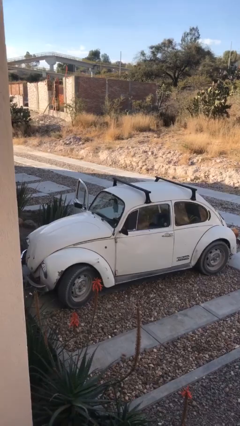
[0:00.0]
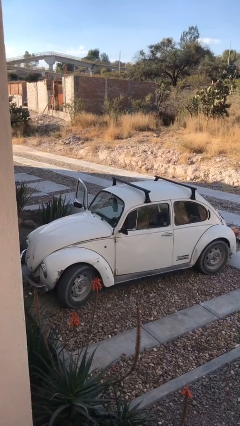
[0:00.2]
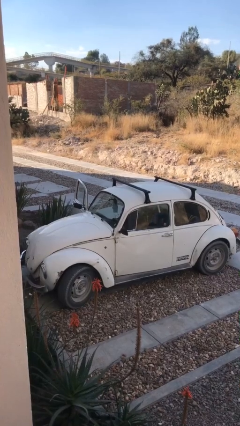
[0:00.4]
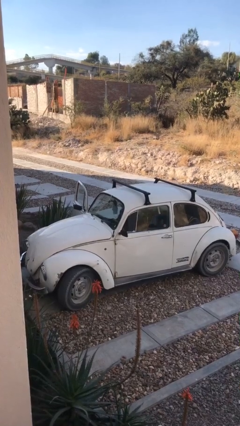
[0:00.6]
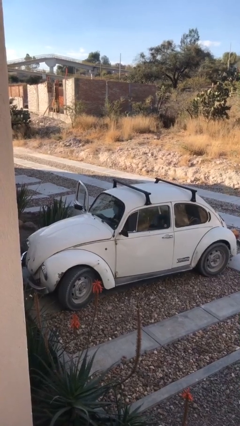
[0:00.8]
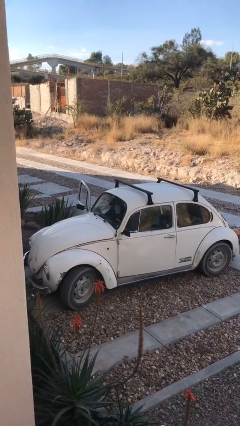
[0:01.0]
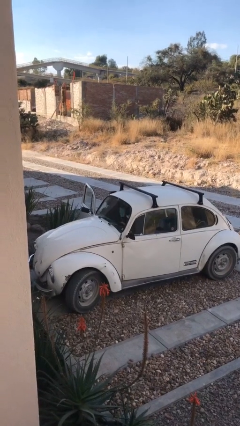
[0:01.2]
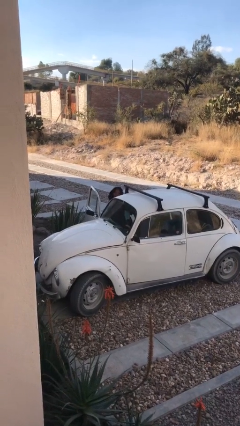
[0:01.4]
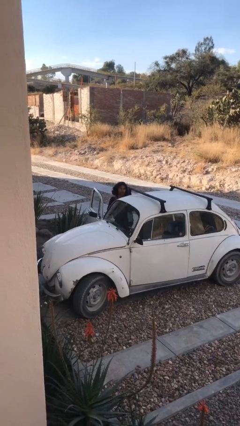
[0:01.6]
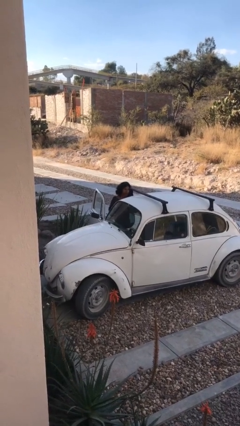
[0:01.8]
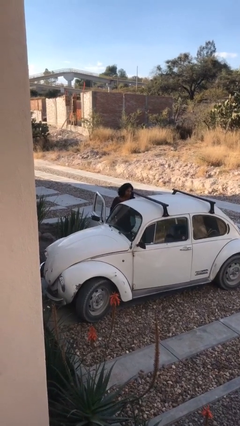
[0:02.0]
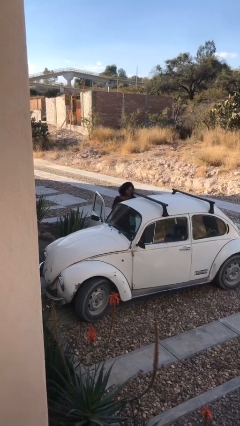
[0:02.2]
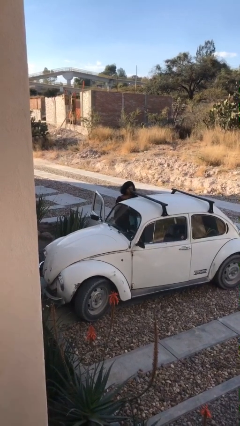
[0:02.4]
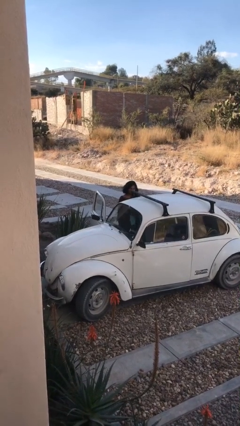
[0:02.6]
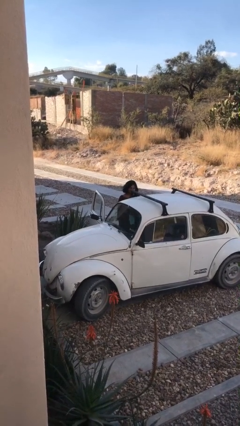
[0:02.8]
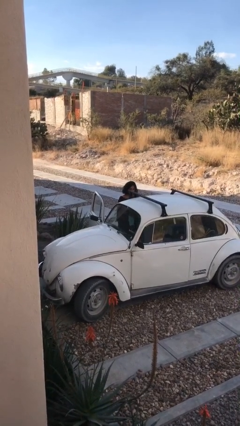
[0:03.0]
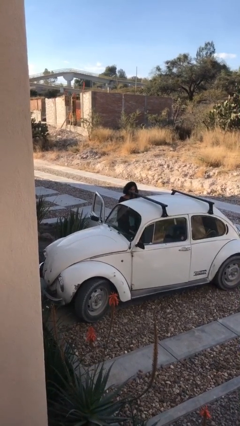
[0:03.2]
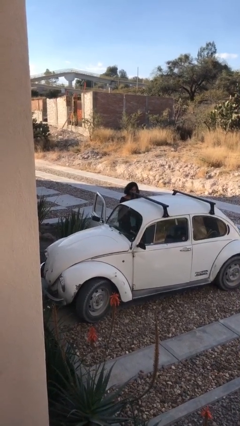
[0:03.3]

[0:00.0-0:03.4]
person exits car

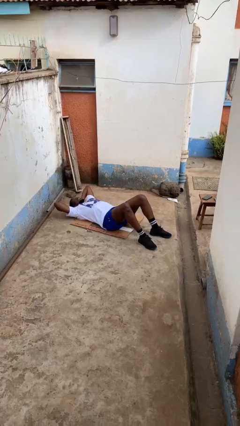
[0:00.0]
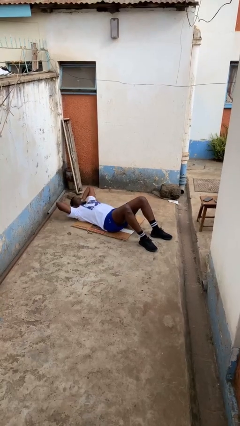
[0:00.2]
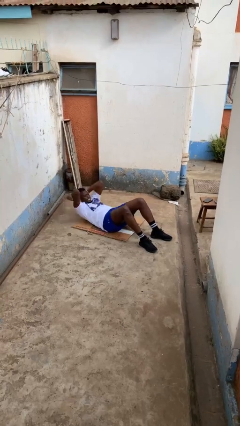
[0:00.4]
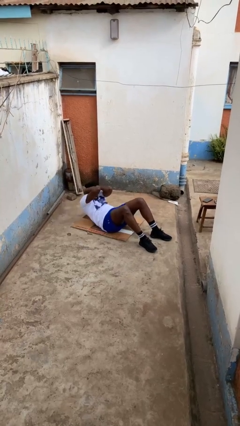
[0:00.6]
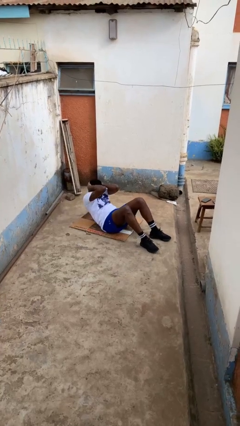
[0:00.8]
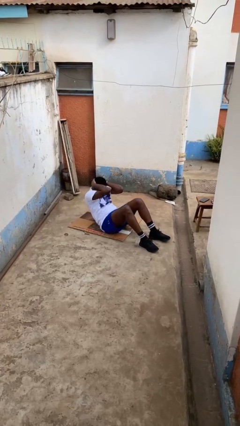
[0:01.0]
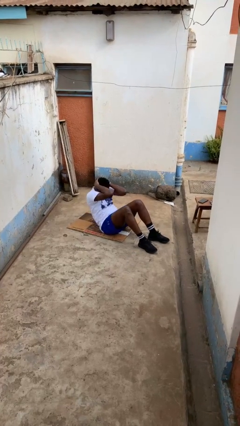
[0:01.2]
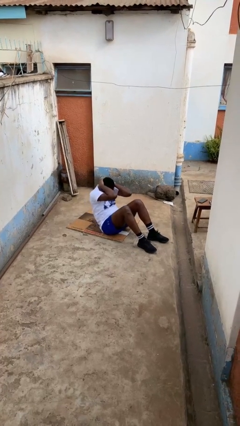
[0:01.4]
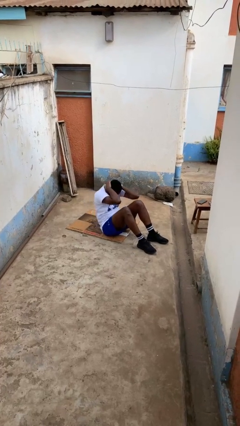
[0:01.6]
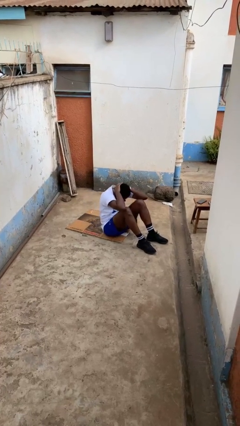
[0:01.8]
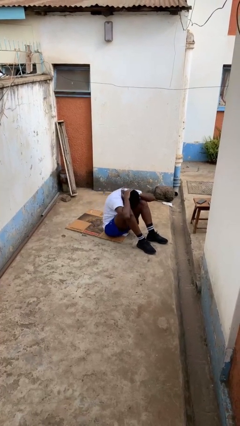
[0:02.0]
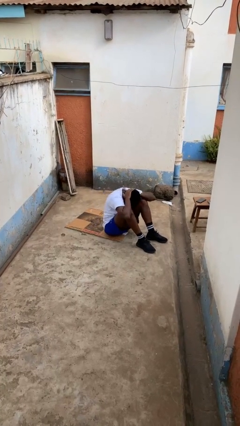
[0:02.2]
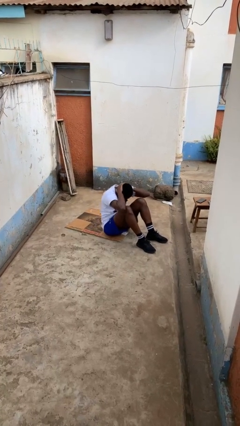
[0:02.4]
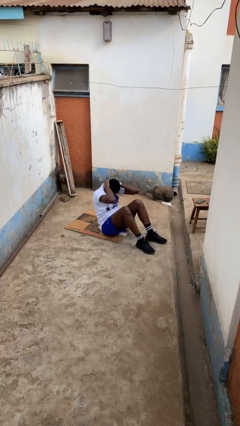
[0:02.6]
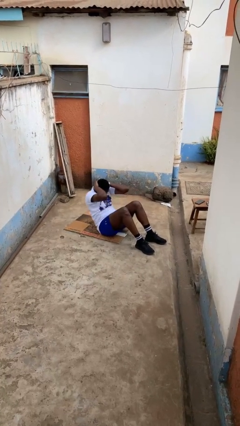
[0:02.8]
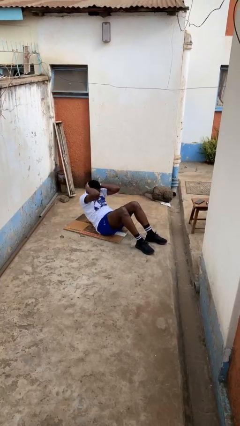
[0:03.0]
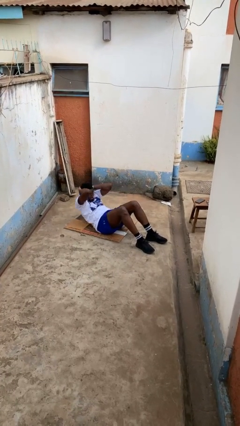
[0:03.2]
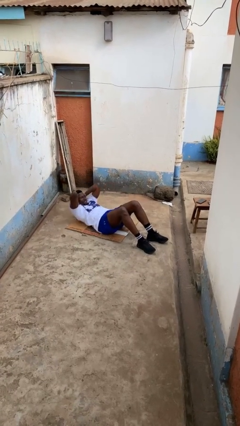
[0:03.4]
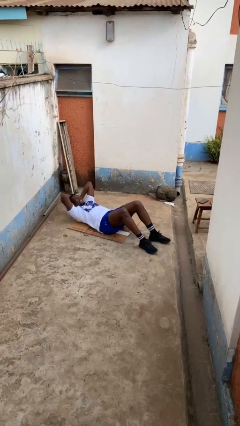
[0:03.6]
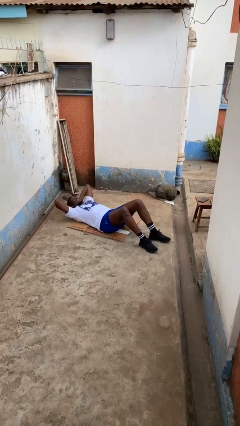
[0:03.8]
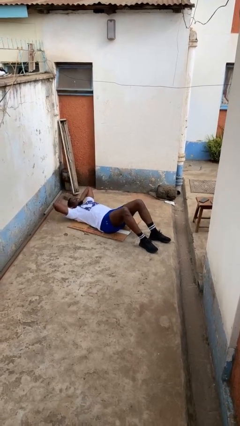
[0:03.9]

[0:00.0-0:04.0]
person exercises with situp

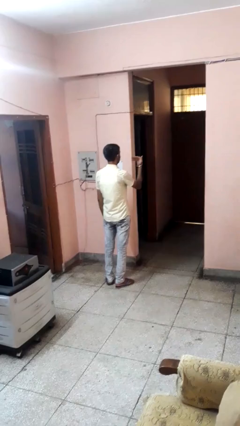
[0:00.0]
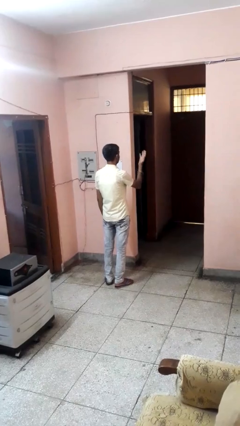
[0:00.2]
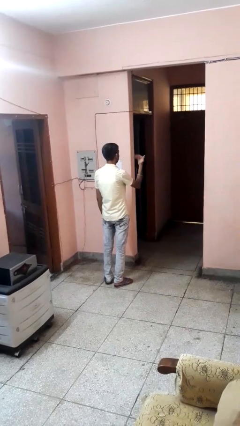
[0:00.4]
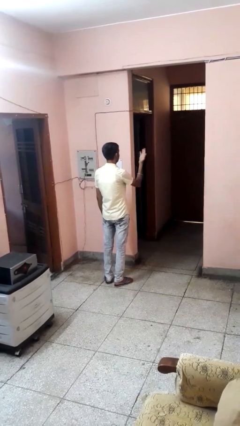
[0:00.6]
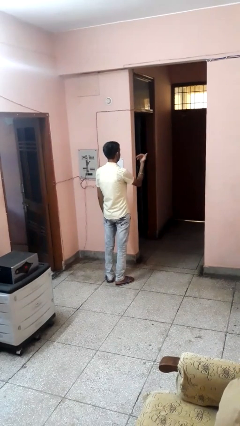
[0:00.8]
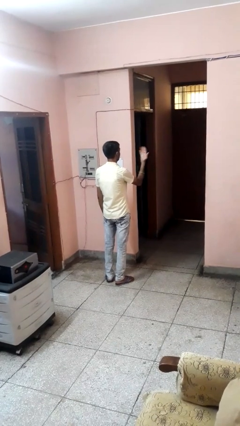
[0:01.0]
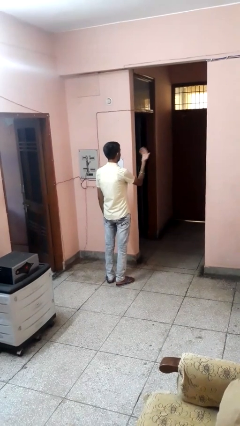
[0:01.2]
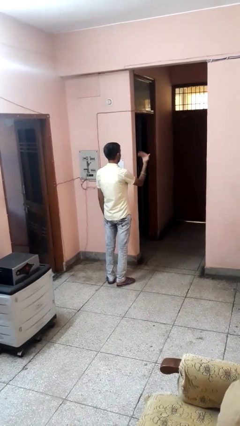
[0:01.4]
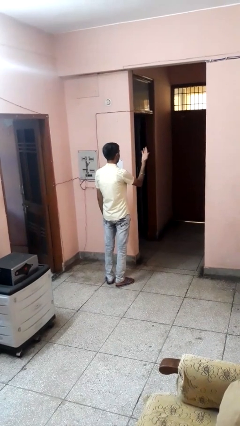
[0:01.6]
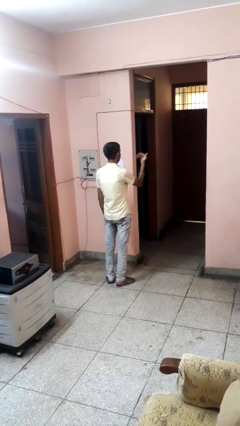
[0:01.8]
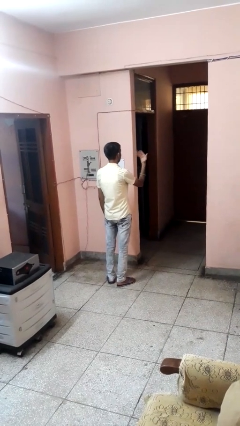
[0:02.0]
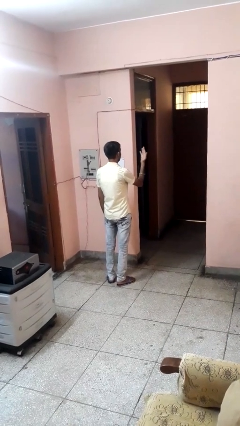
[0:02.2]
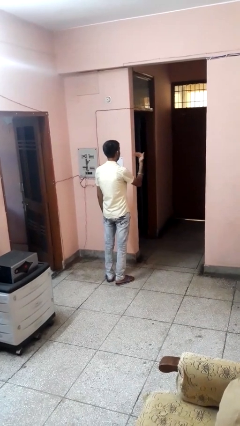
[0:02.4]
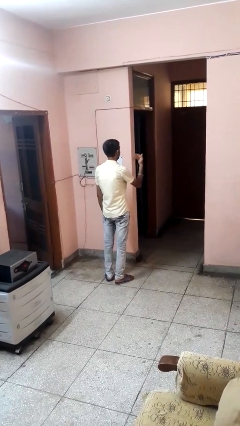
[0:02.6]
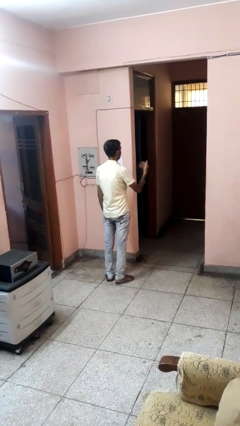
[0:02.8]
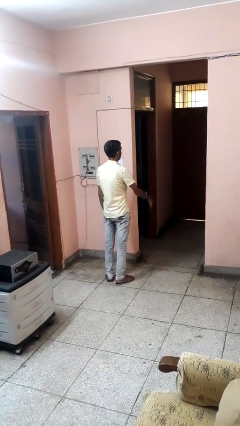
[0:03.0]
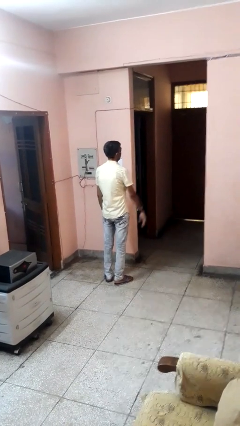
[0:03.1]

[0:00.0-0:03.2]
person gestures come here

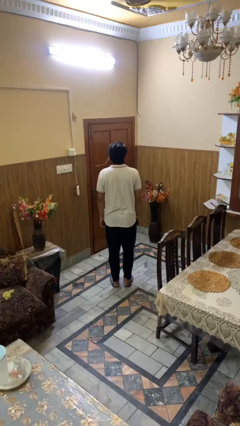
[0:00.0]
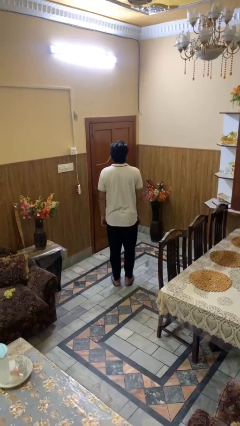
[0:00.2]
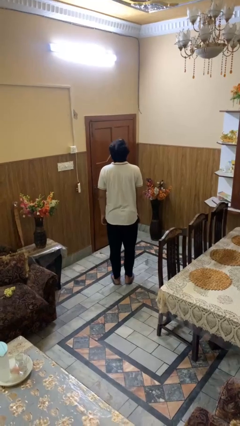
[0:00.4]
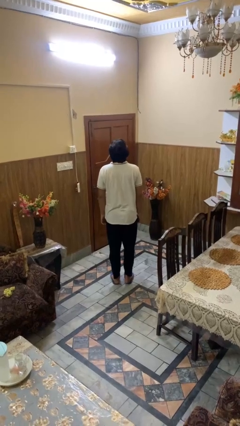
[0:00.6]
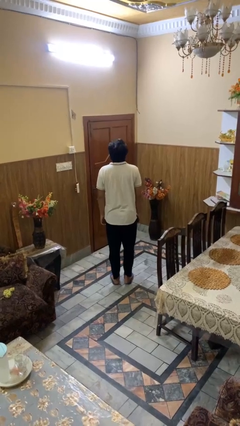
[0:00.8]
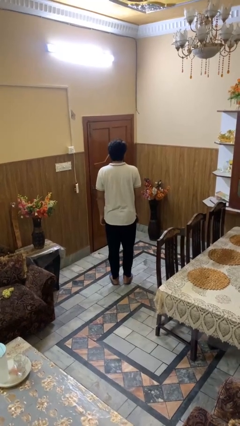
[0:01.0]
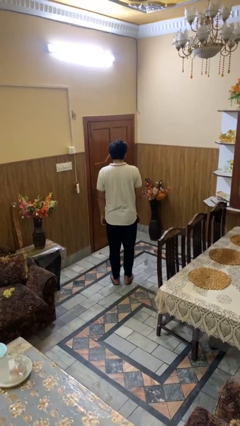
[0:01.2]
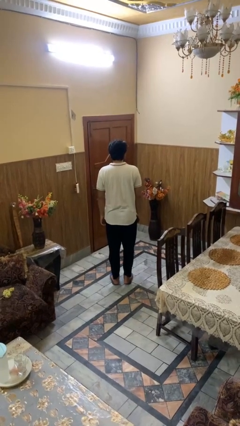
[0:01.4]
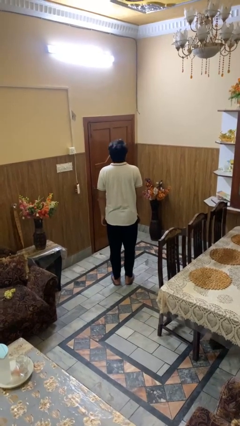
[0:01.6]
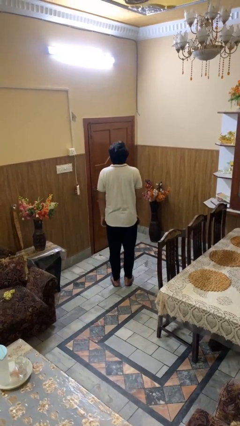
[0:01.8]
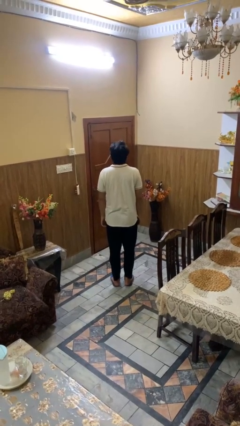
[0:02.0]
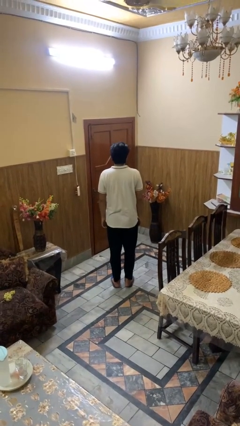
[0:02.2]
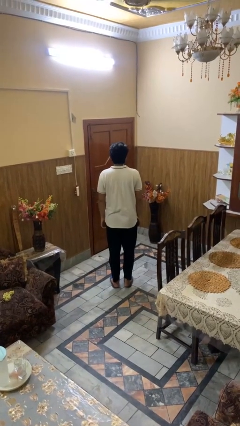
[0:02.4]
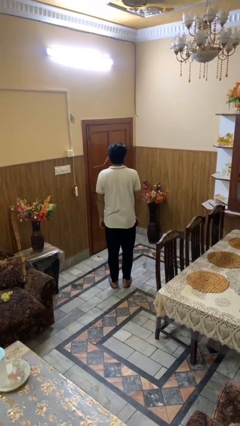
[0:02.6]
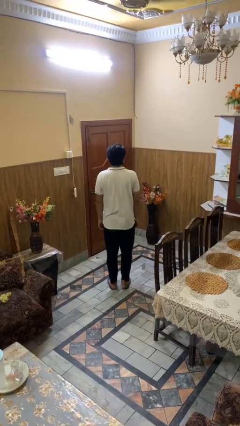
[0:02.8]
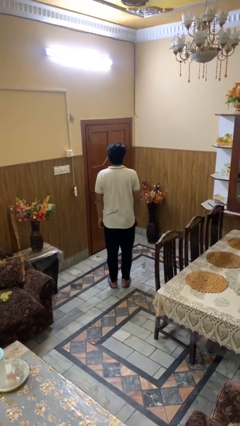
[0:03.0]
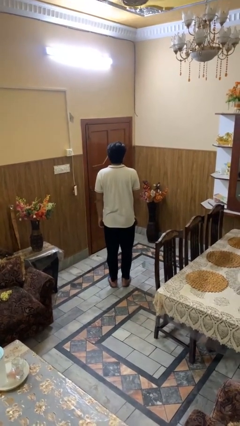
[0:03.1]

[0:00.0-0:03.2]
person nods head

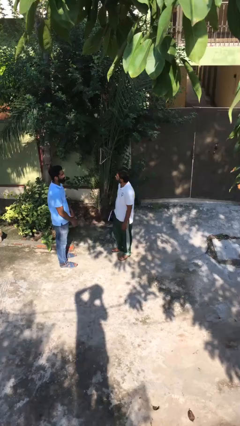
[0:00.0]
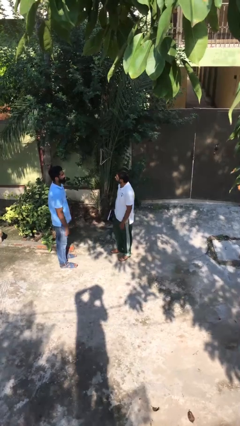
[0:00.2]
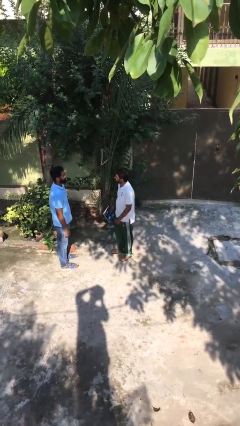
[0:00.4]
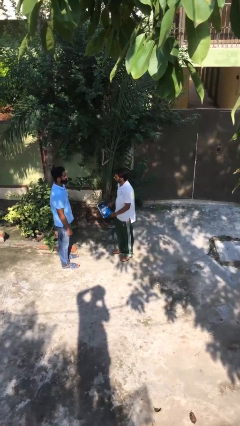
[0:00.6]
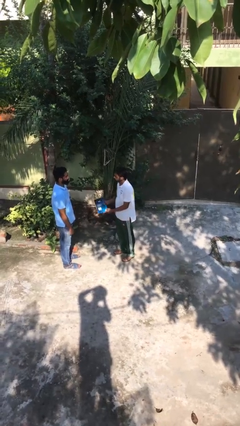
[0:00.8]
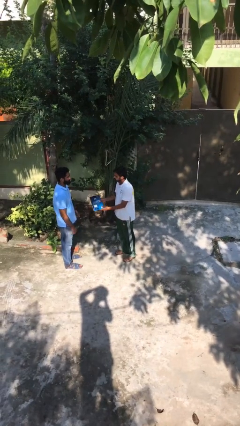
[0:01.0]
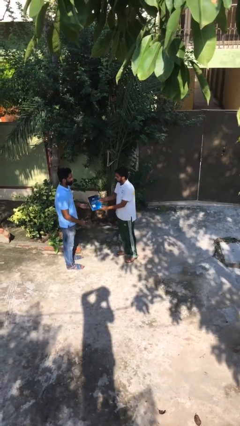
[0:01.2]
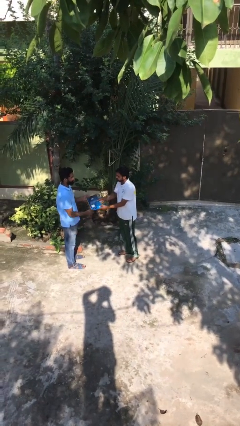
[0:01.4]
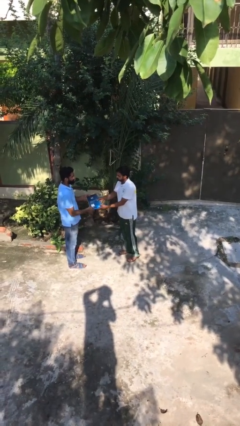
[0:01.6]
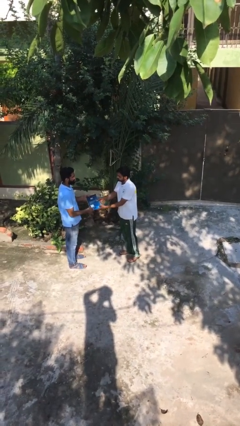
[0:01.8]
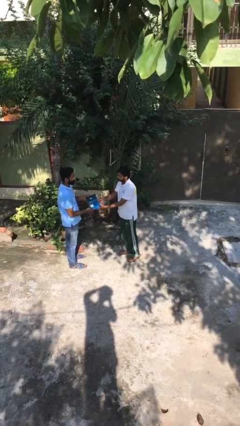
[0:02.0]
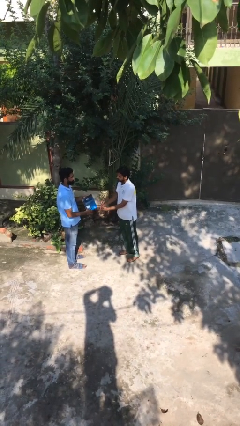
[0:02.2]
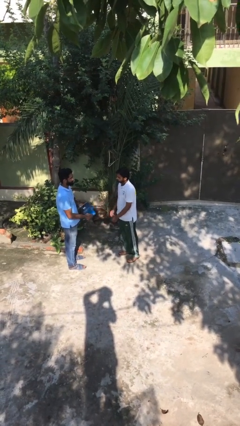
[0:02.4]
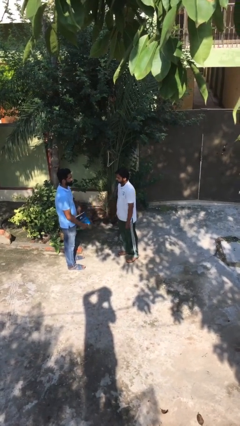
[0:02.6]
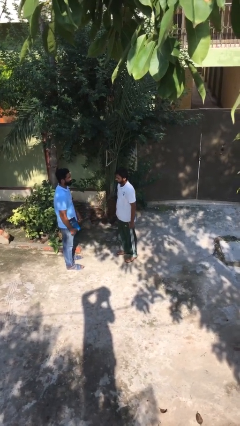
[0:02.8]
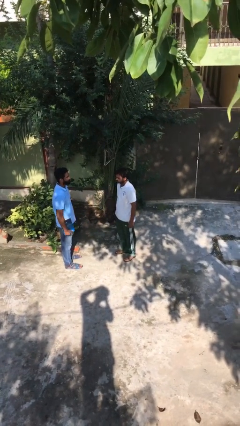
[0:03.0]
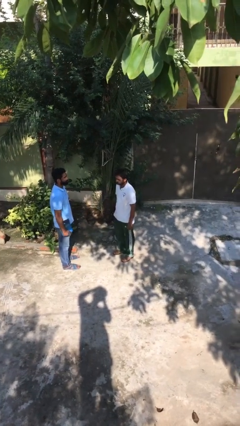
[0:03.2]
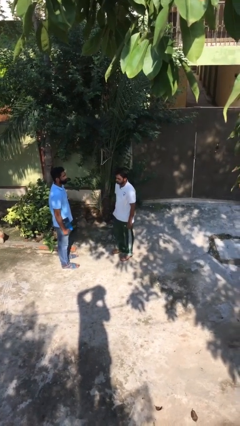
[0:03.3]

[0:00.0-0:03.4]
person transfers object to person

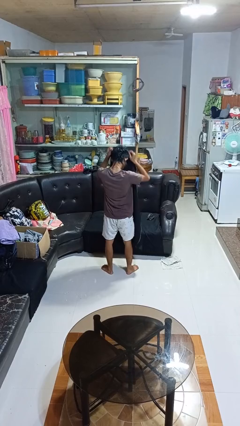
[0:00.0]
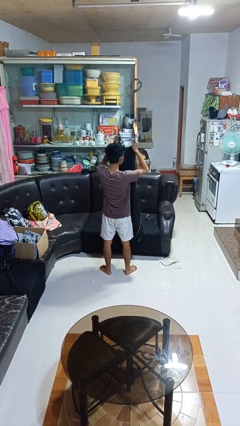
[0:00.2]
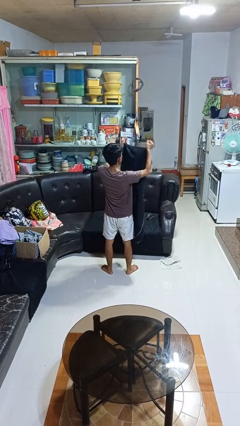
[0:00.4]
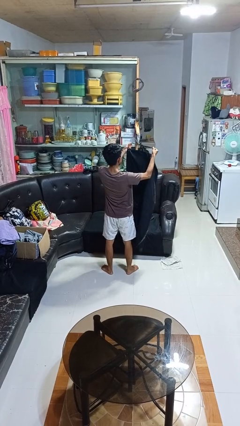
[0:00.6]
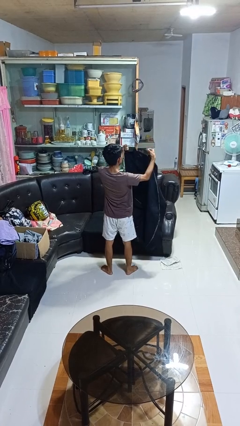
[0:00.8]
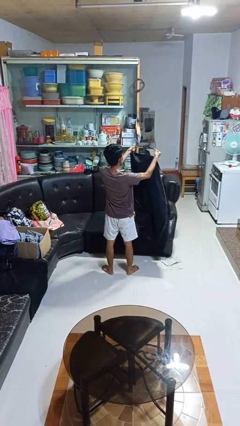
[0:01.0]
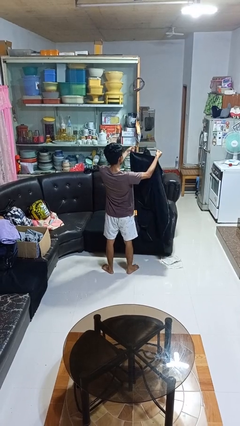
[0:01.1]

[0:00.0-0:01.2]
person takes off apron
